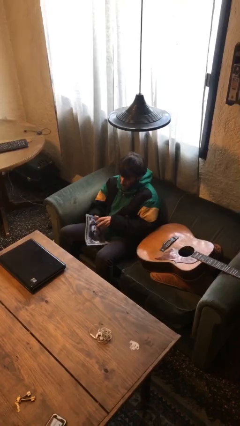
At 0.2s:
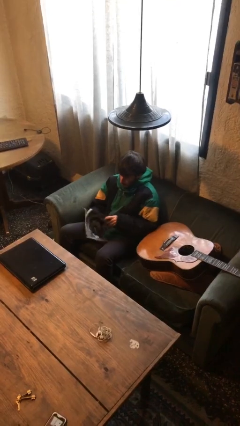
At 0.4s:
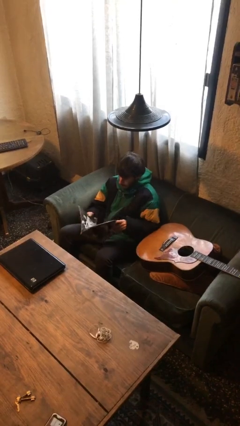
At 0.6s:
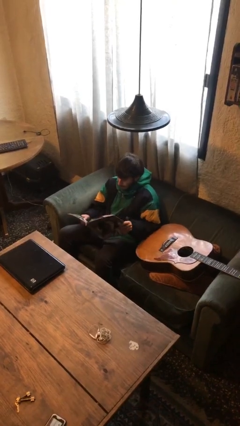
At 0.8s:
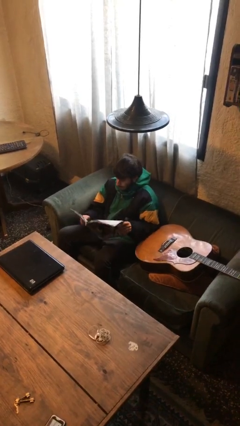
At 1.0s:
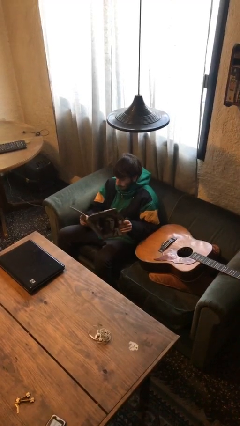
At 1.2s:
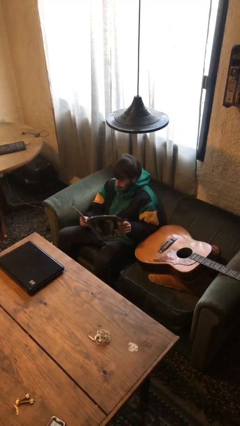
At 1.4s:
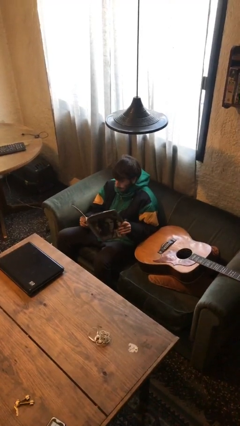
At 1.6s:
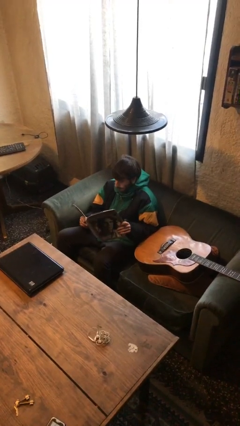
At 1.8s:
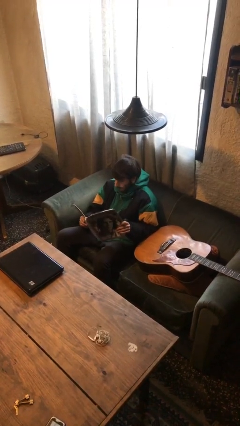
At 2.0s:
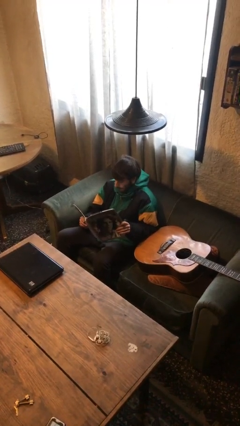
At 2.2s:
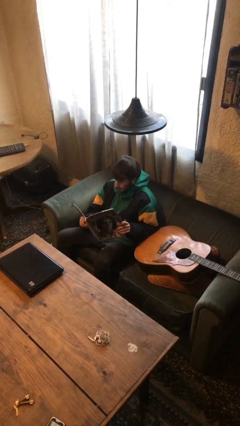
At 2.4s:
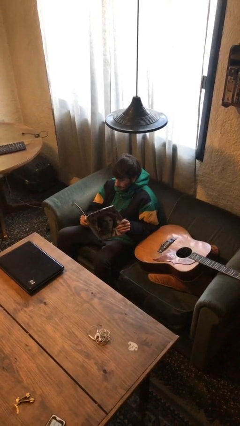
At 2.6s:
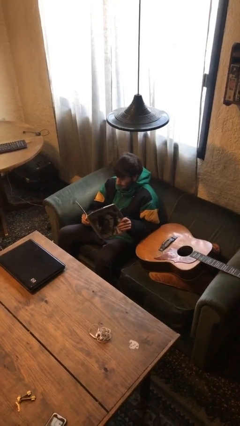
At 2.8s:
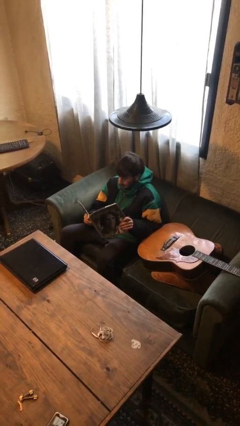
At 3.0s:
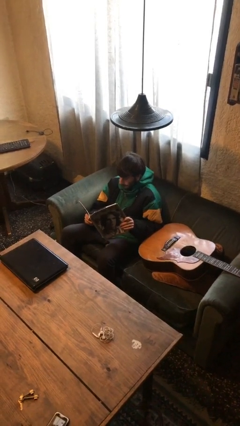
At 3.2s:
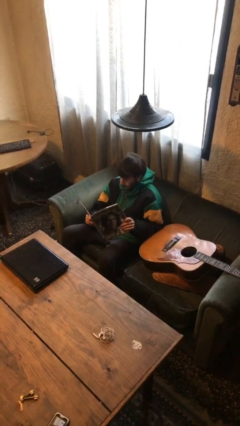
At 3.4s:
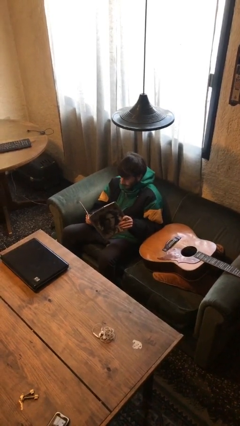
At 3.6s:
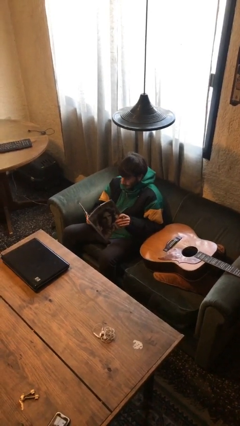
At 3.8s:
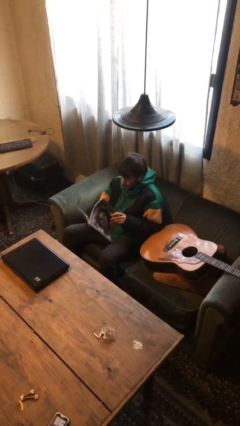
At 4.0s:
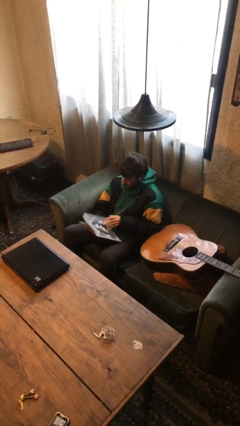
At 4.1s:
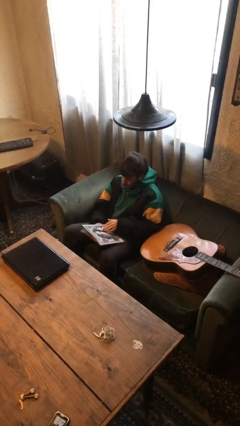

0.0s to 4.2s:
person reads magazine

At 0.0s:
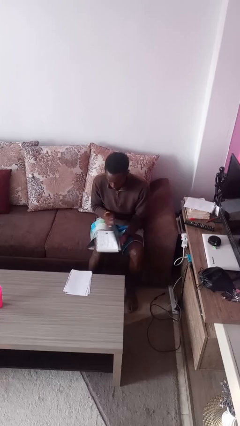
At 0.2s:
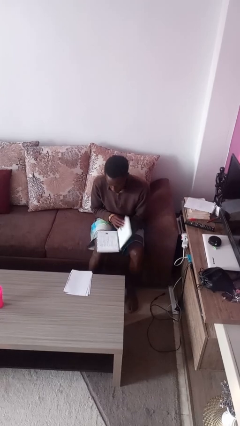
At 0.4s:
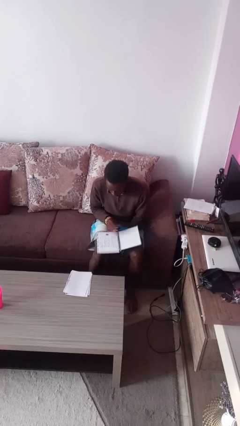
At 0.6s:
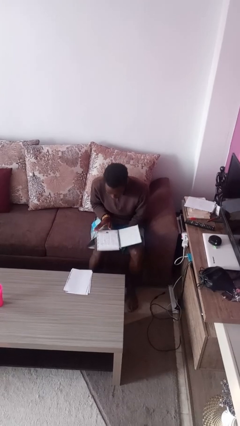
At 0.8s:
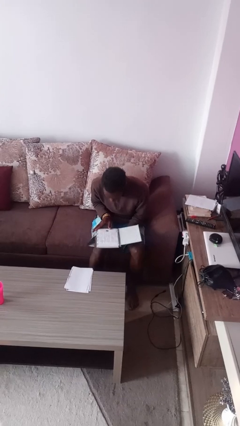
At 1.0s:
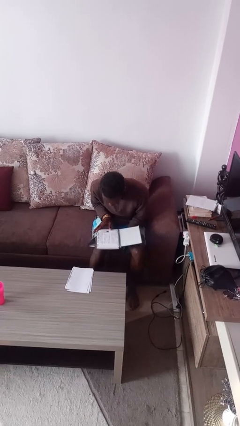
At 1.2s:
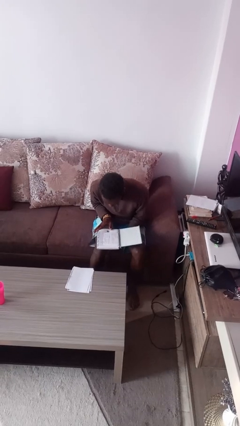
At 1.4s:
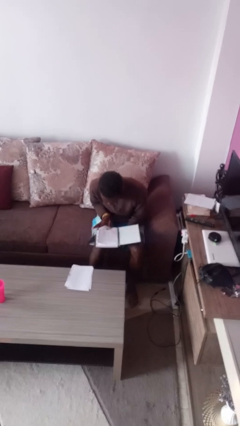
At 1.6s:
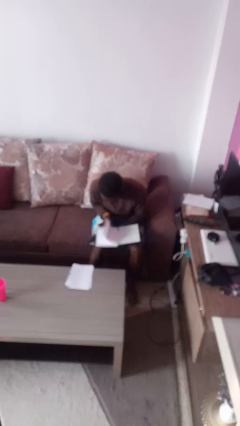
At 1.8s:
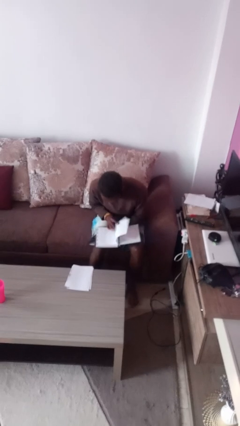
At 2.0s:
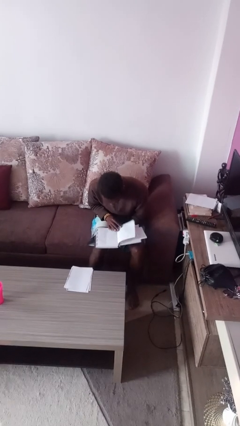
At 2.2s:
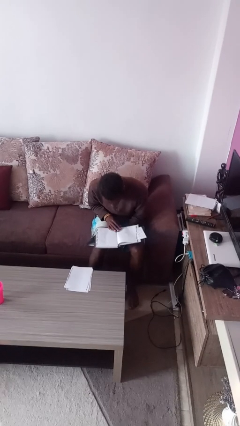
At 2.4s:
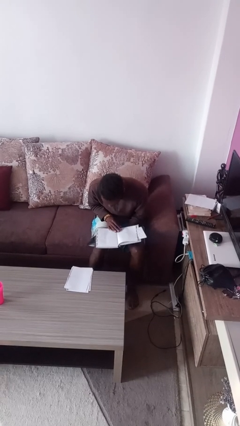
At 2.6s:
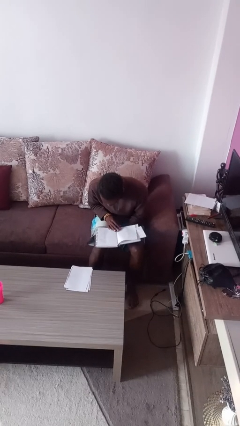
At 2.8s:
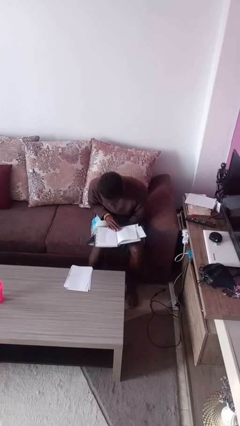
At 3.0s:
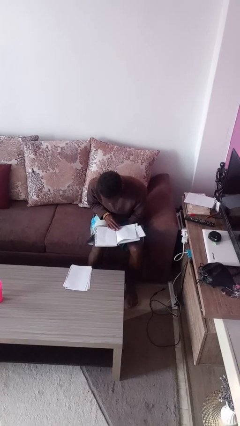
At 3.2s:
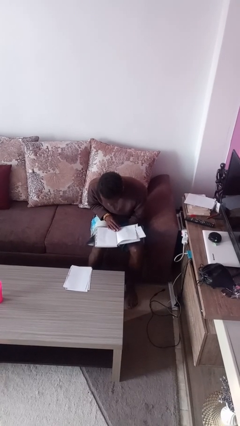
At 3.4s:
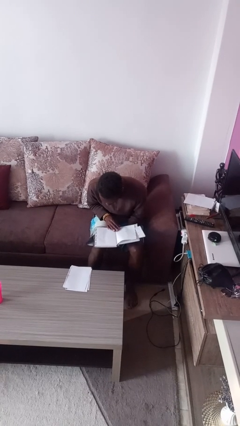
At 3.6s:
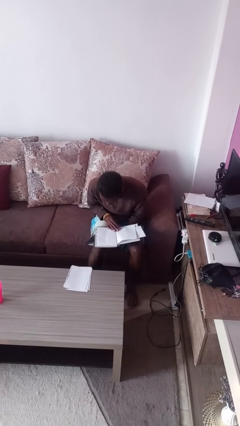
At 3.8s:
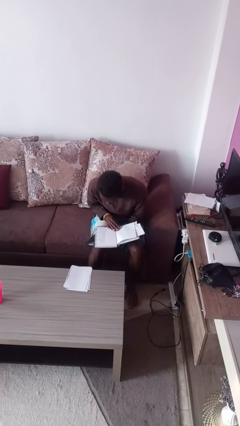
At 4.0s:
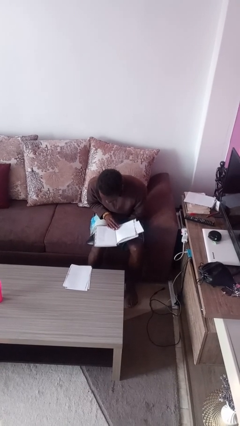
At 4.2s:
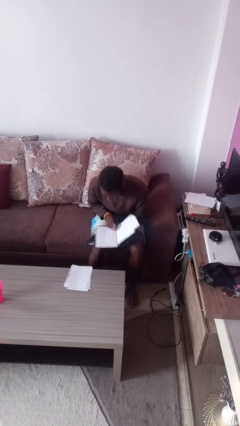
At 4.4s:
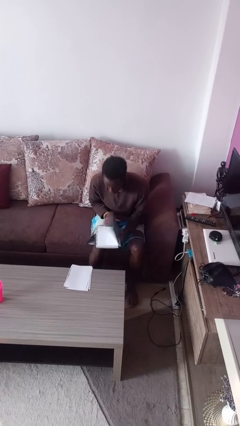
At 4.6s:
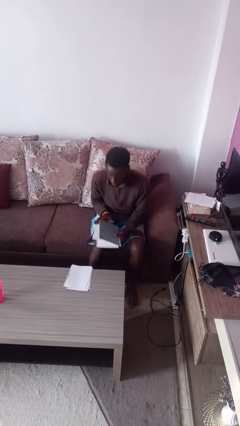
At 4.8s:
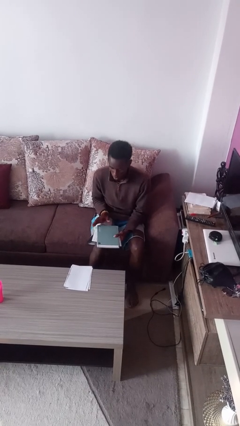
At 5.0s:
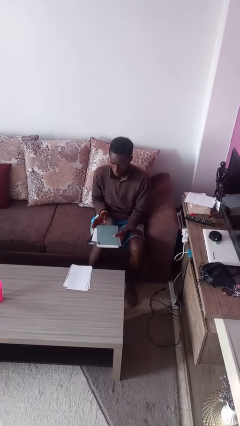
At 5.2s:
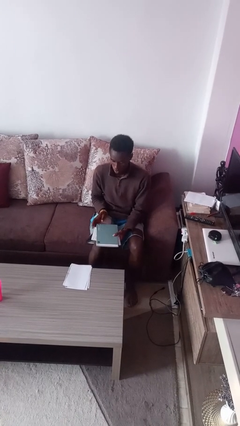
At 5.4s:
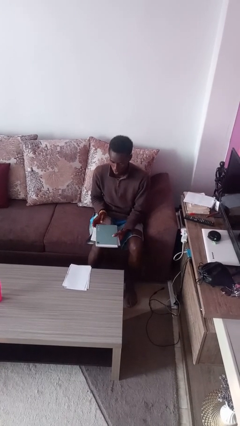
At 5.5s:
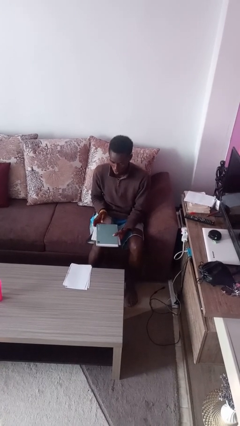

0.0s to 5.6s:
person reads book

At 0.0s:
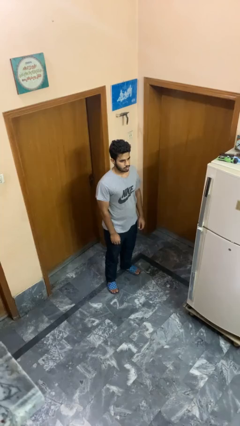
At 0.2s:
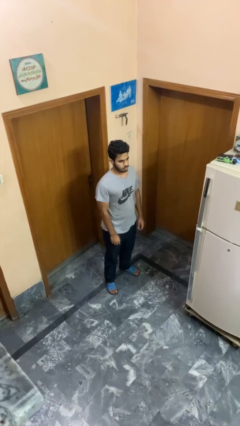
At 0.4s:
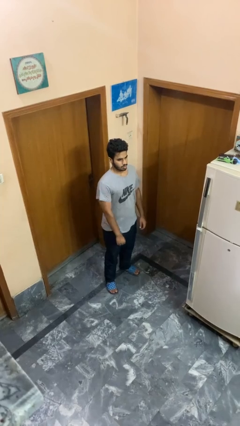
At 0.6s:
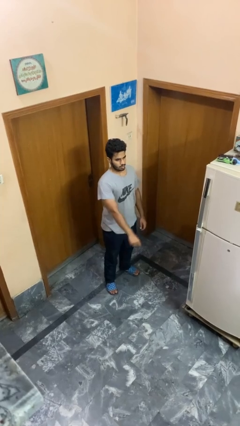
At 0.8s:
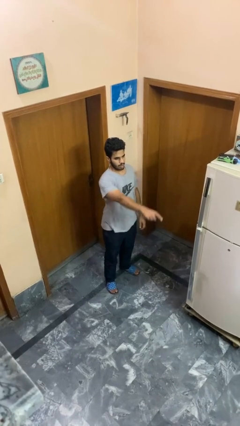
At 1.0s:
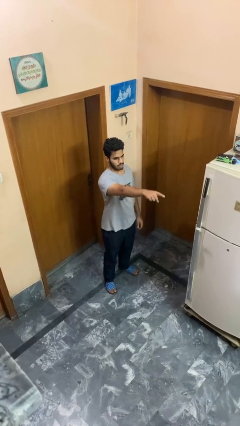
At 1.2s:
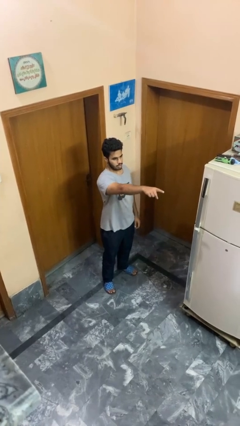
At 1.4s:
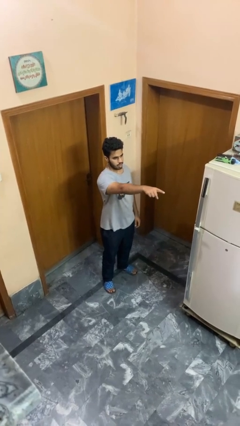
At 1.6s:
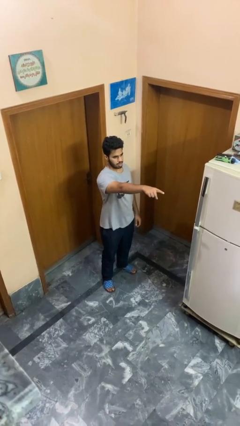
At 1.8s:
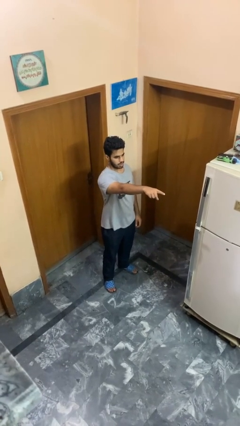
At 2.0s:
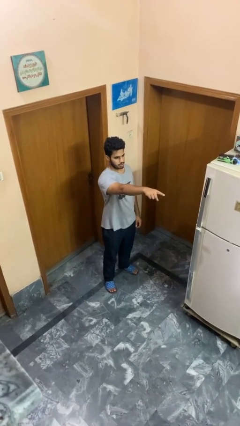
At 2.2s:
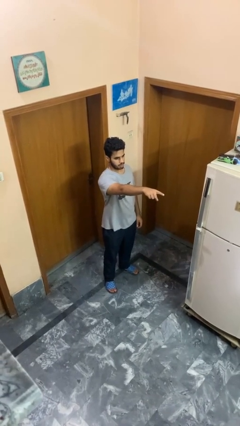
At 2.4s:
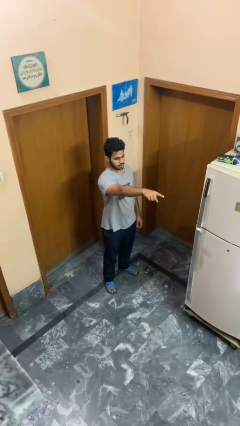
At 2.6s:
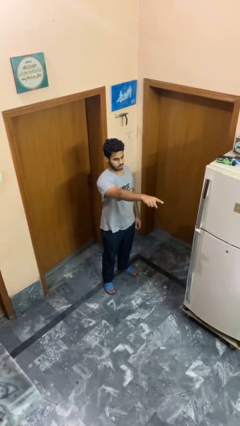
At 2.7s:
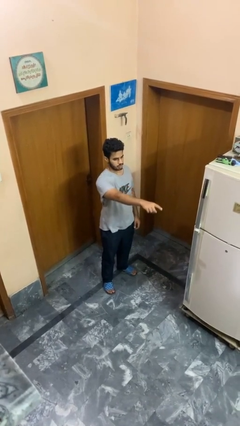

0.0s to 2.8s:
person points at person

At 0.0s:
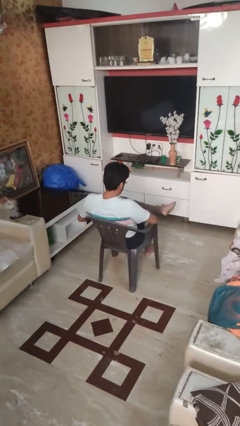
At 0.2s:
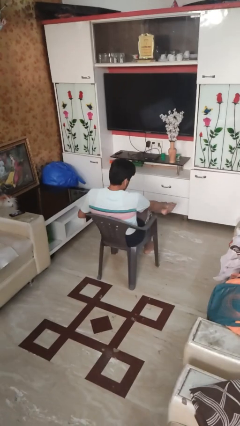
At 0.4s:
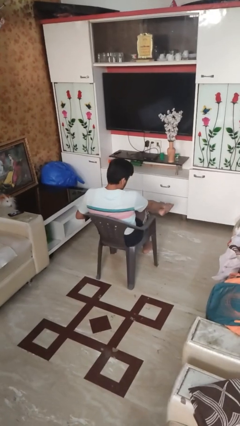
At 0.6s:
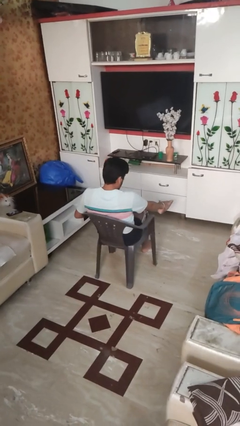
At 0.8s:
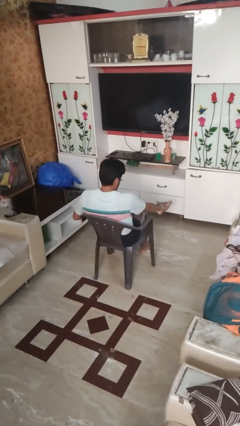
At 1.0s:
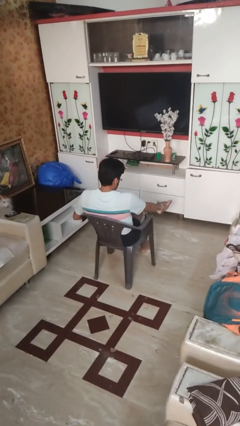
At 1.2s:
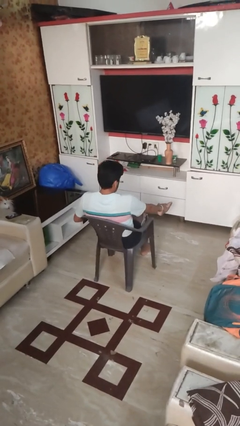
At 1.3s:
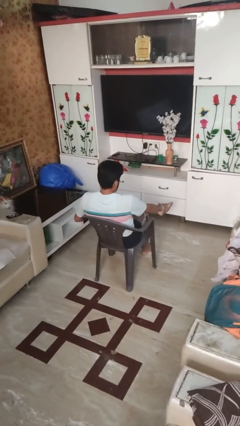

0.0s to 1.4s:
person swats bug

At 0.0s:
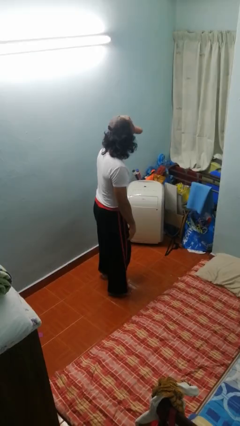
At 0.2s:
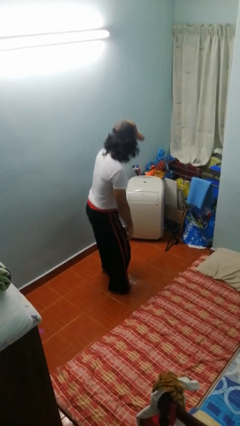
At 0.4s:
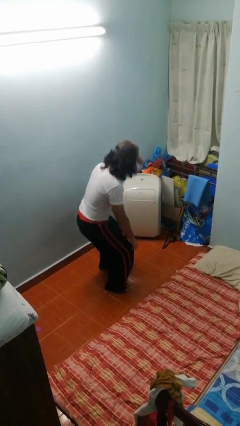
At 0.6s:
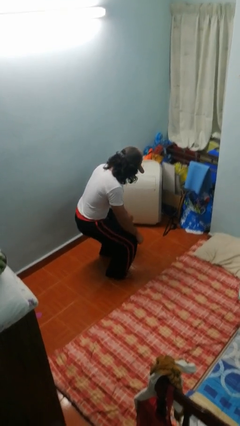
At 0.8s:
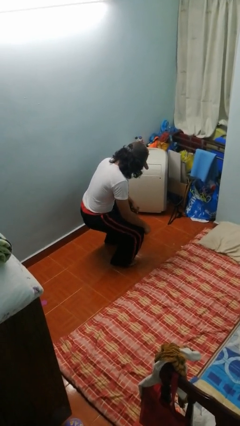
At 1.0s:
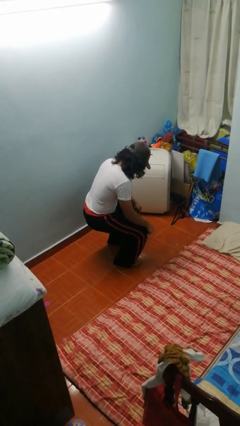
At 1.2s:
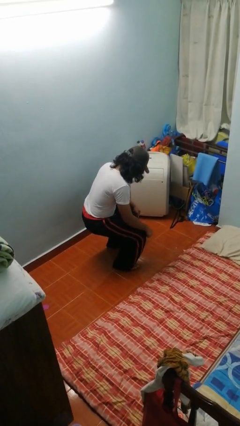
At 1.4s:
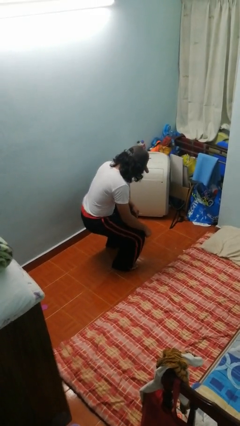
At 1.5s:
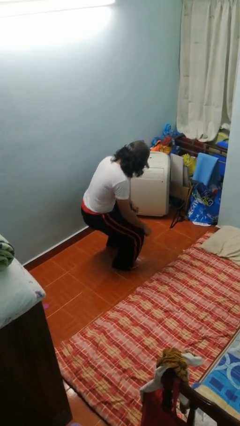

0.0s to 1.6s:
person squats

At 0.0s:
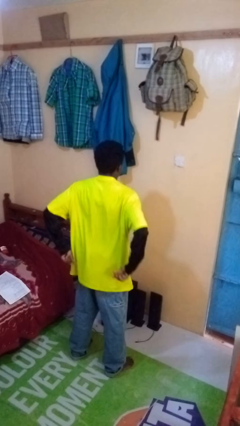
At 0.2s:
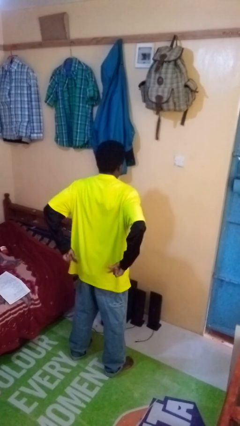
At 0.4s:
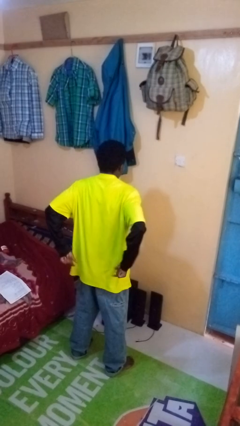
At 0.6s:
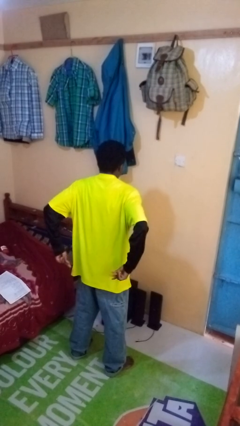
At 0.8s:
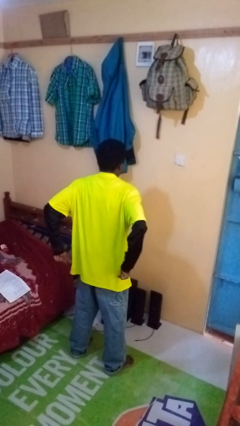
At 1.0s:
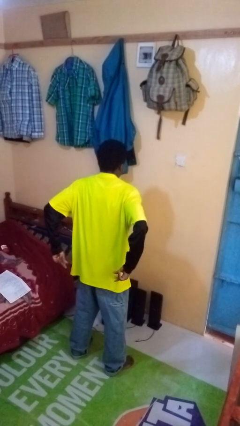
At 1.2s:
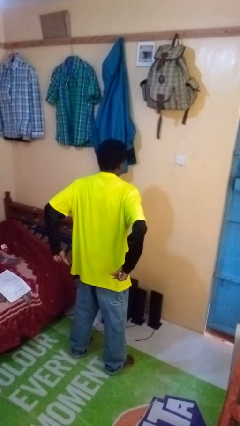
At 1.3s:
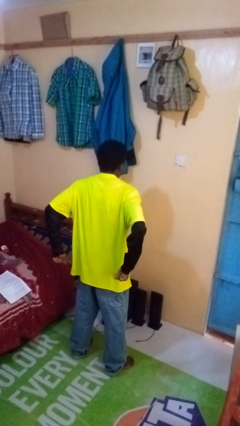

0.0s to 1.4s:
person snaps fingers

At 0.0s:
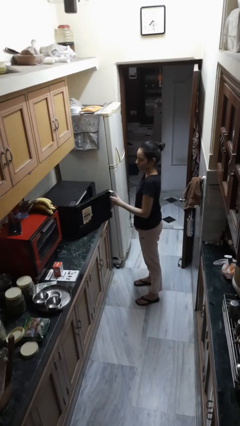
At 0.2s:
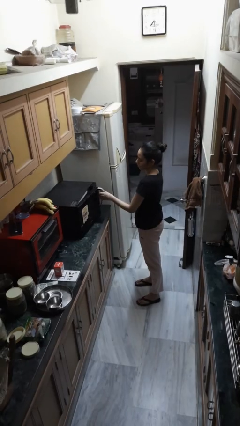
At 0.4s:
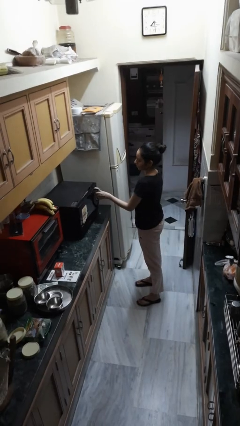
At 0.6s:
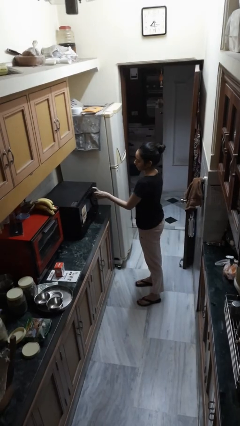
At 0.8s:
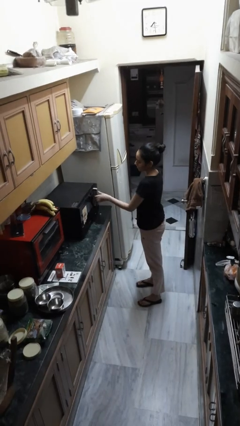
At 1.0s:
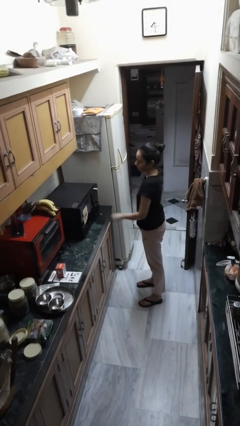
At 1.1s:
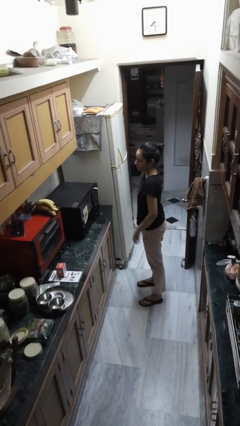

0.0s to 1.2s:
person closes oven door
